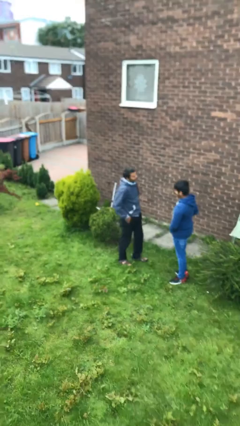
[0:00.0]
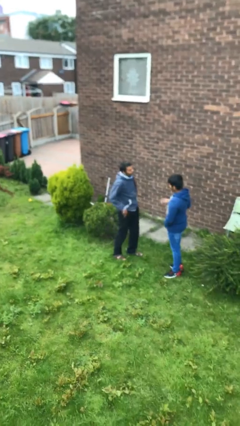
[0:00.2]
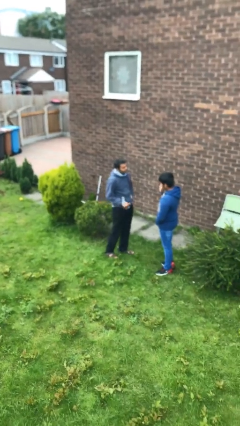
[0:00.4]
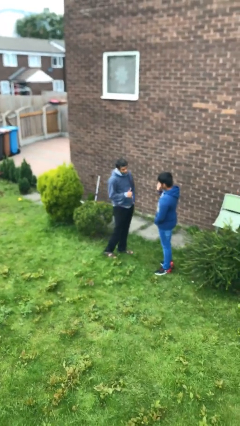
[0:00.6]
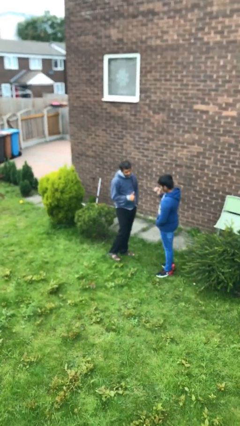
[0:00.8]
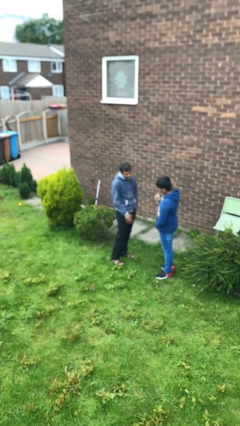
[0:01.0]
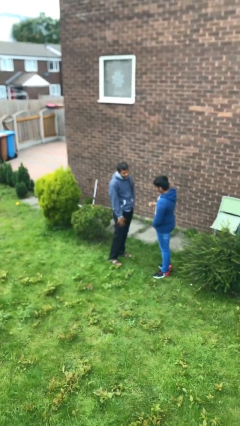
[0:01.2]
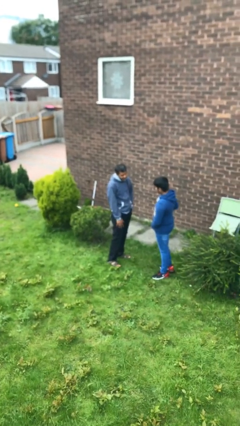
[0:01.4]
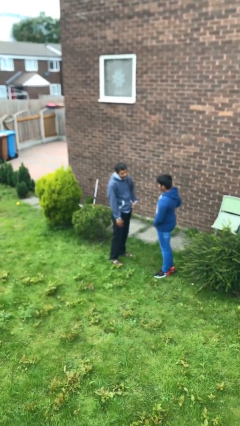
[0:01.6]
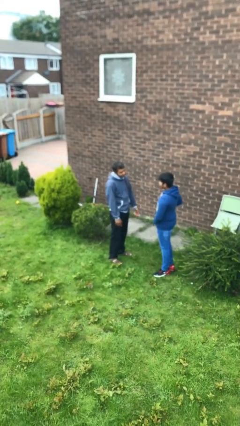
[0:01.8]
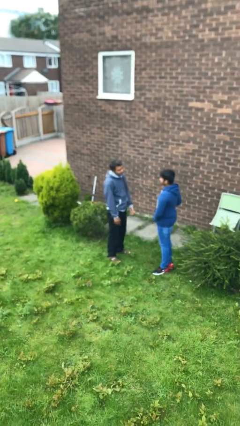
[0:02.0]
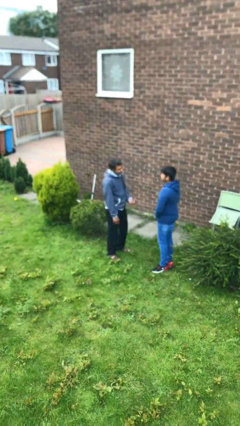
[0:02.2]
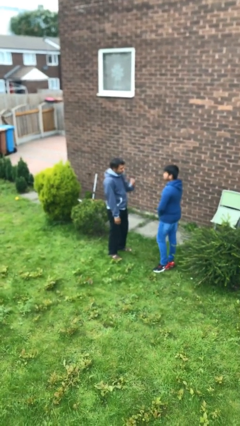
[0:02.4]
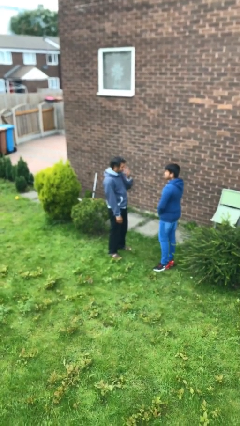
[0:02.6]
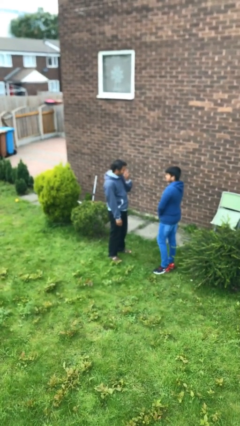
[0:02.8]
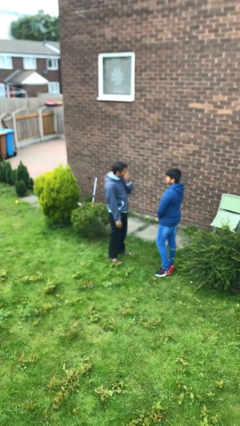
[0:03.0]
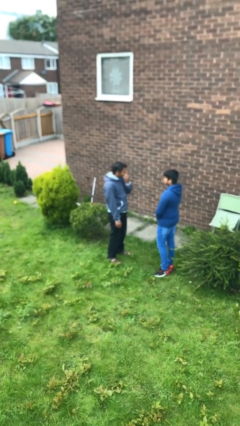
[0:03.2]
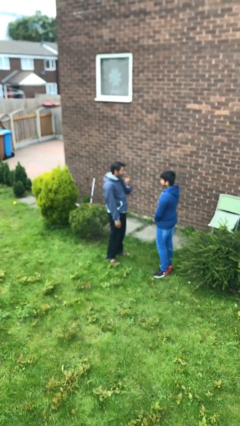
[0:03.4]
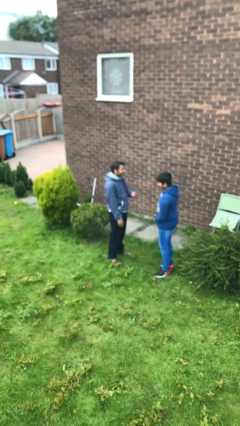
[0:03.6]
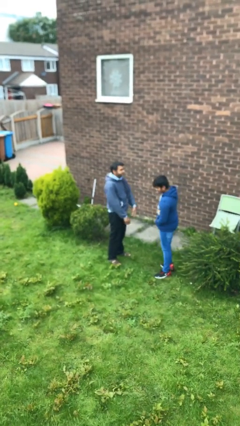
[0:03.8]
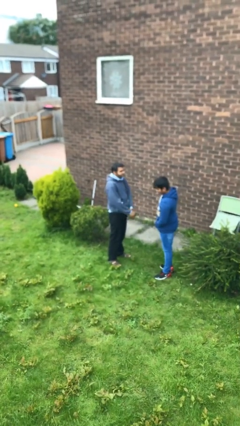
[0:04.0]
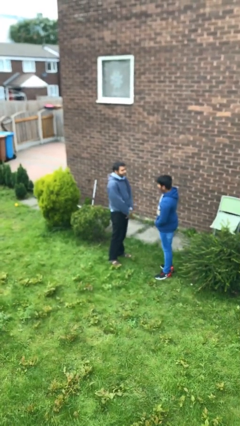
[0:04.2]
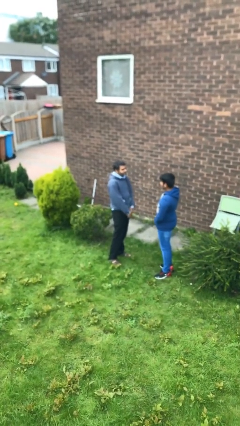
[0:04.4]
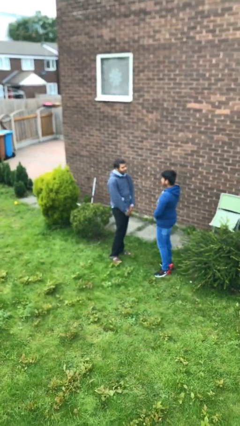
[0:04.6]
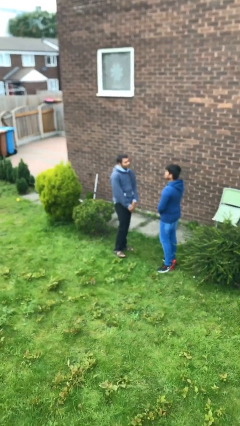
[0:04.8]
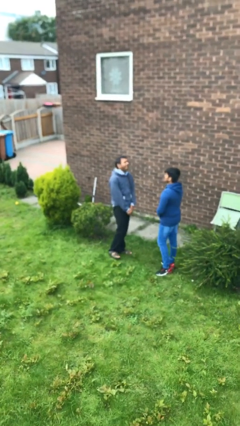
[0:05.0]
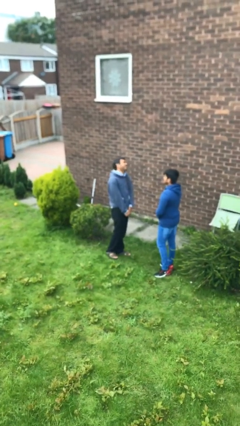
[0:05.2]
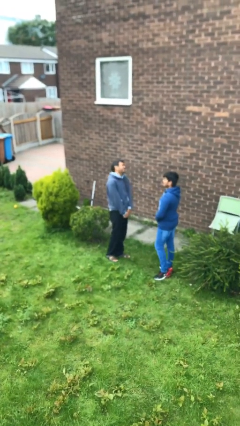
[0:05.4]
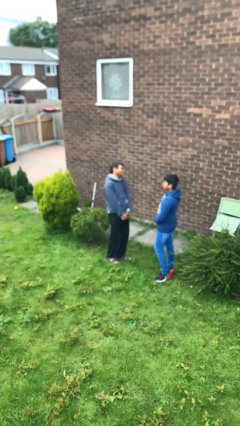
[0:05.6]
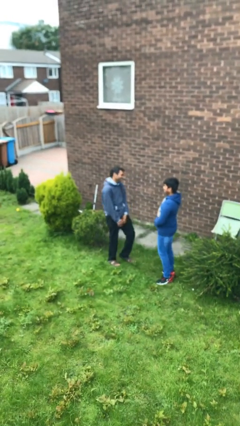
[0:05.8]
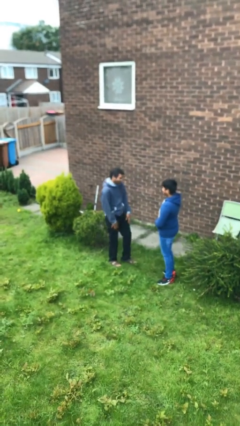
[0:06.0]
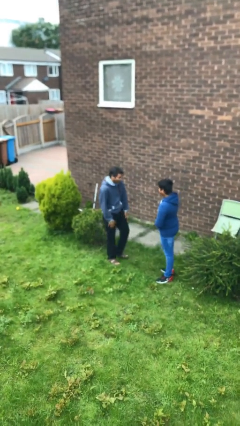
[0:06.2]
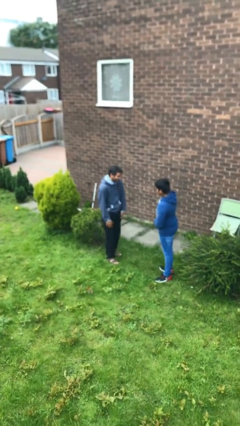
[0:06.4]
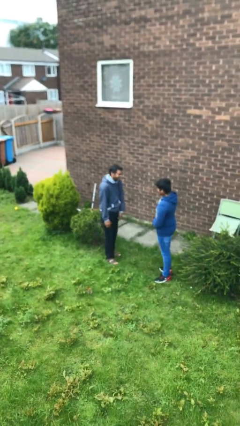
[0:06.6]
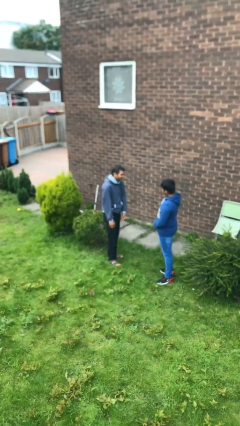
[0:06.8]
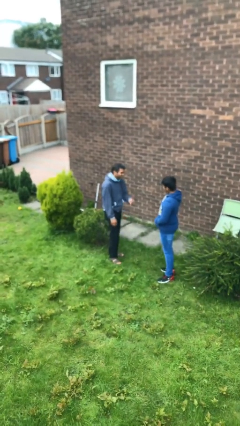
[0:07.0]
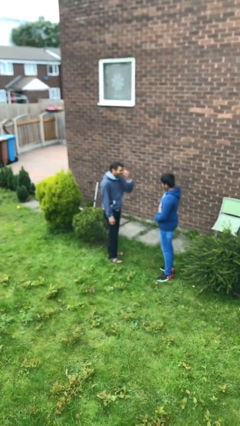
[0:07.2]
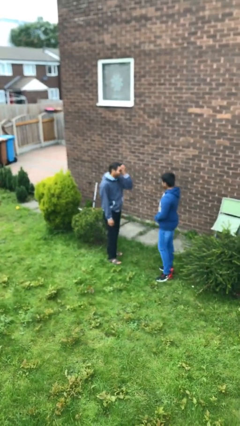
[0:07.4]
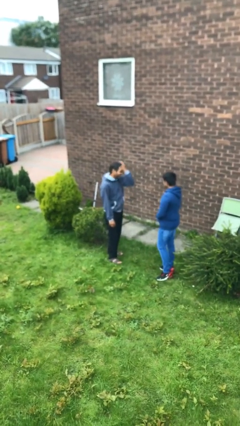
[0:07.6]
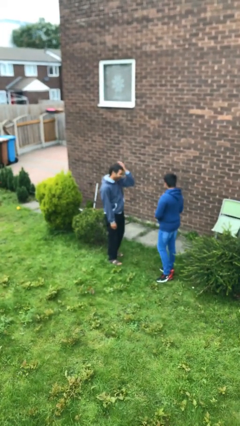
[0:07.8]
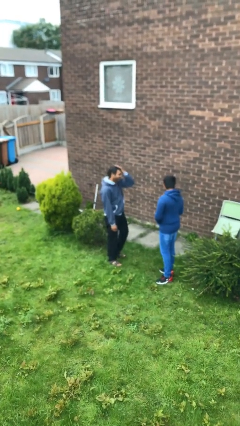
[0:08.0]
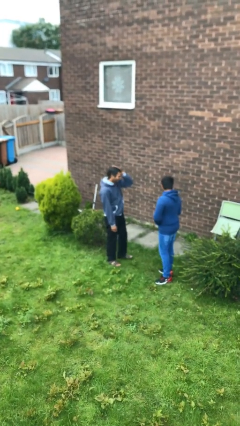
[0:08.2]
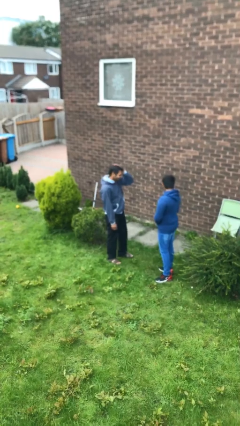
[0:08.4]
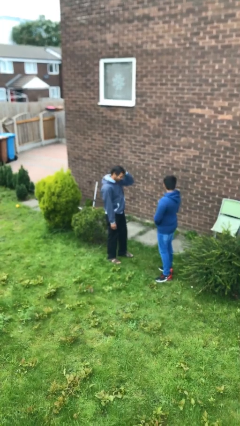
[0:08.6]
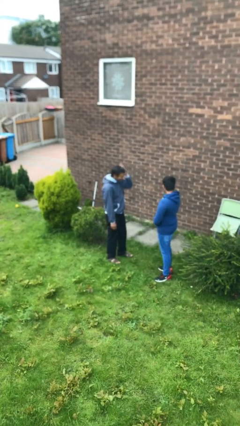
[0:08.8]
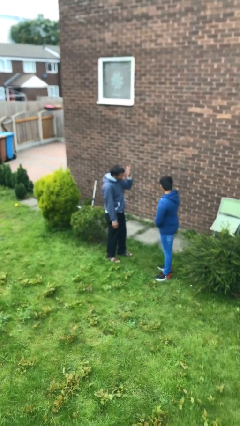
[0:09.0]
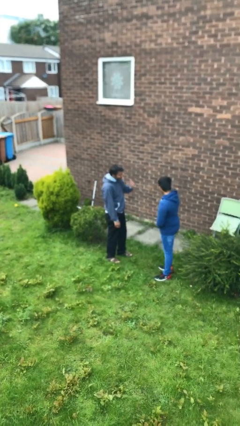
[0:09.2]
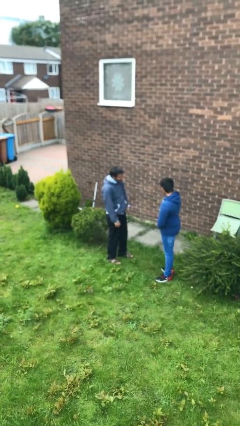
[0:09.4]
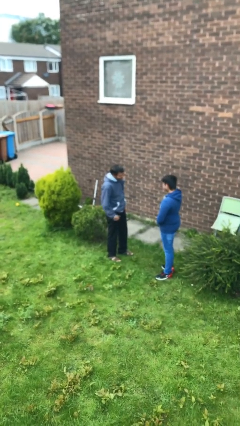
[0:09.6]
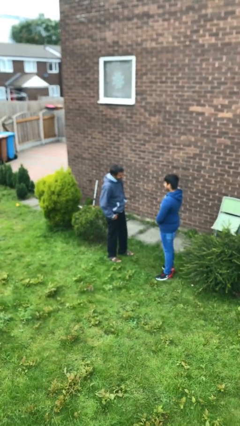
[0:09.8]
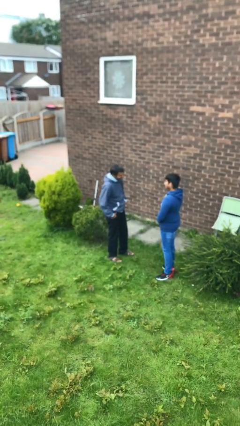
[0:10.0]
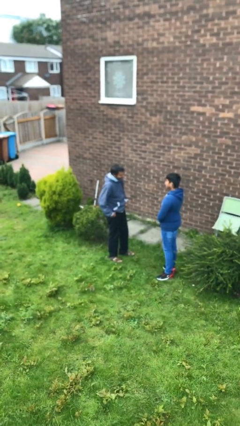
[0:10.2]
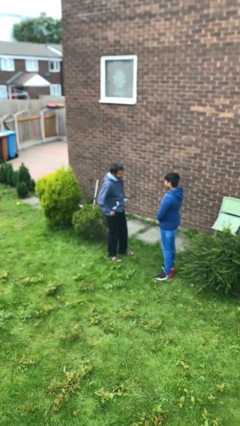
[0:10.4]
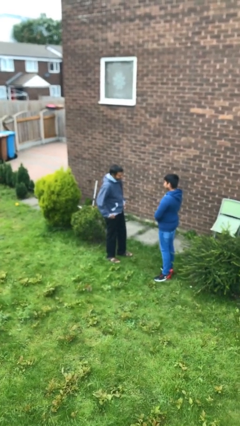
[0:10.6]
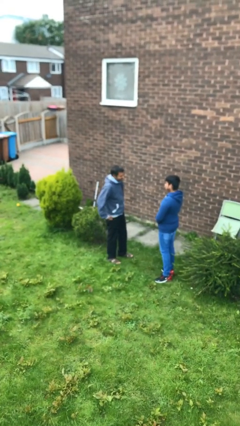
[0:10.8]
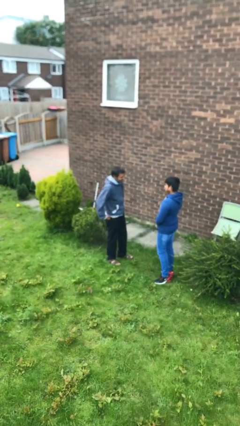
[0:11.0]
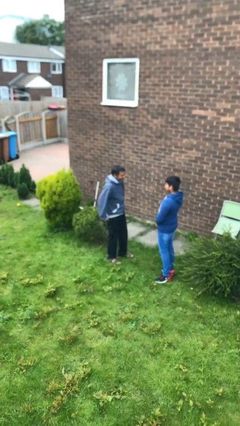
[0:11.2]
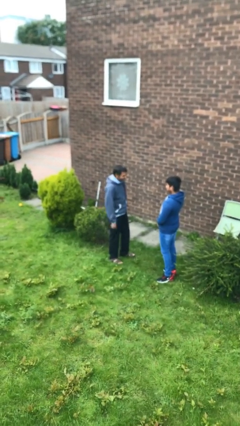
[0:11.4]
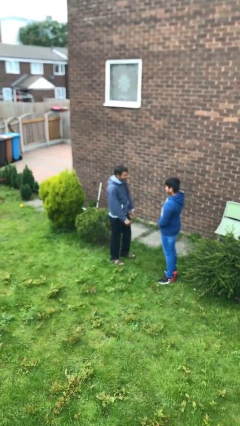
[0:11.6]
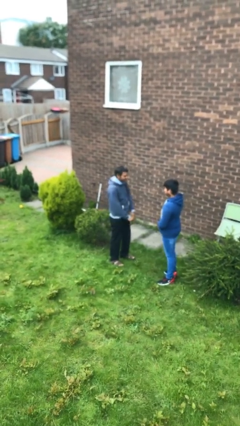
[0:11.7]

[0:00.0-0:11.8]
person talks to person

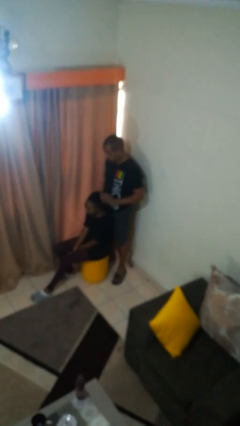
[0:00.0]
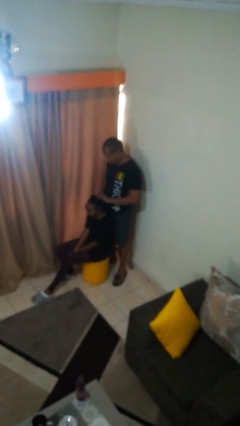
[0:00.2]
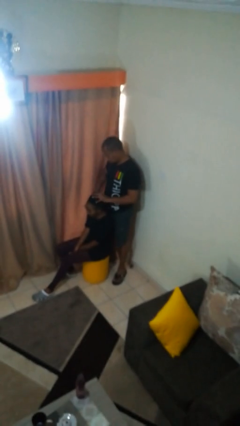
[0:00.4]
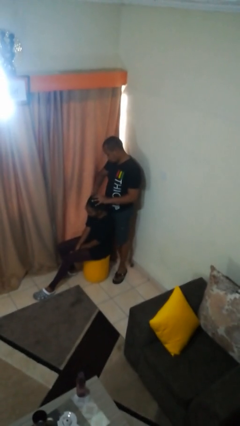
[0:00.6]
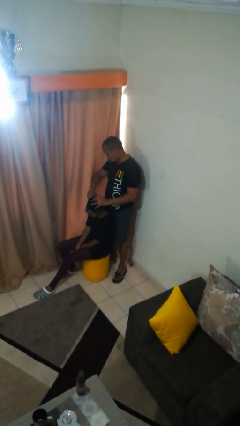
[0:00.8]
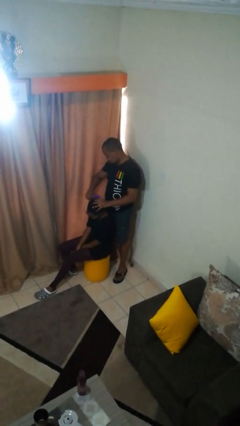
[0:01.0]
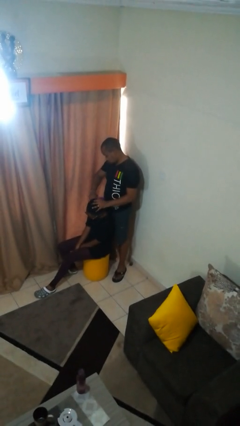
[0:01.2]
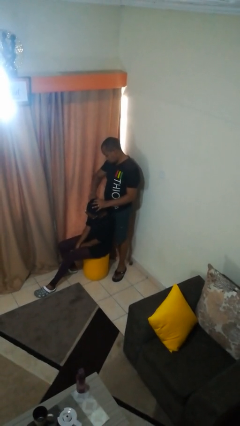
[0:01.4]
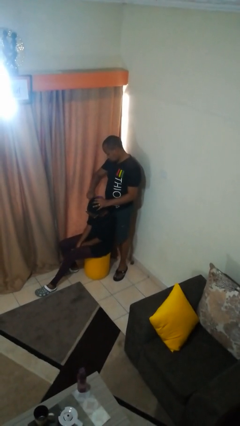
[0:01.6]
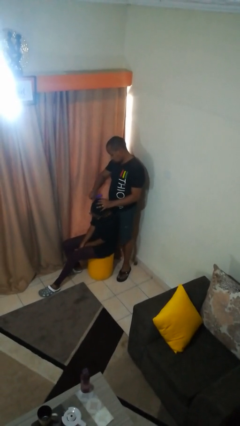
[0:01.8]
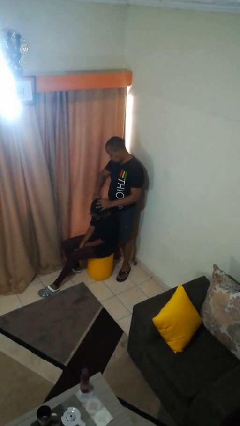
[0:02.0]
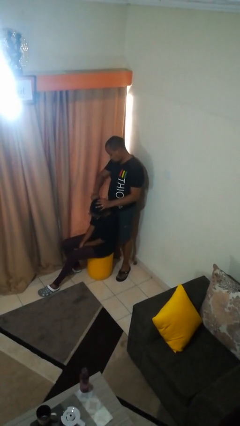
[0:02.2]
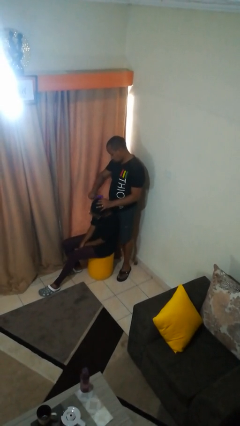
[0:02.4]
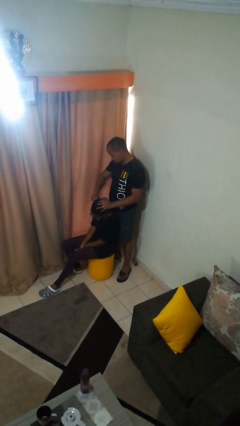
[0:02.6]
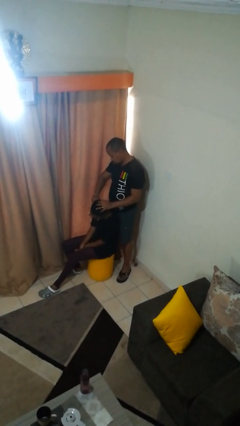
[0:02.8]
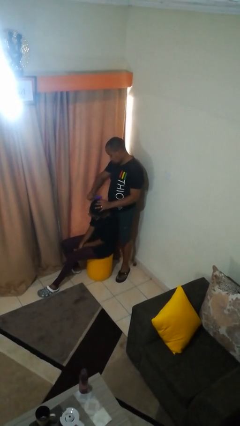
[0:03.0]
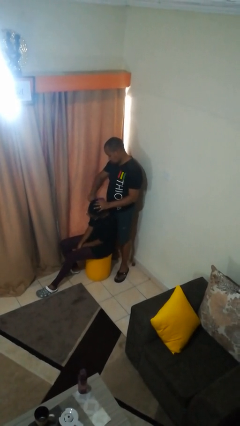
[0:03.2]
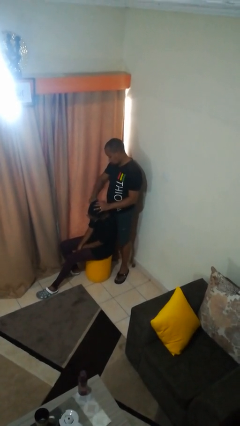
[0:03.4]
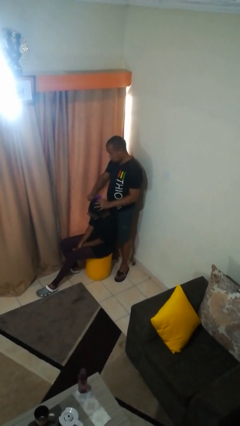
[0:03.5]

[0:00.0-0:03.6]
person brushes hair of person

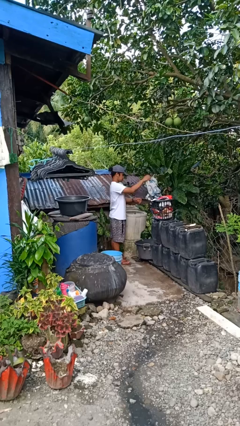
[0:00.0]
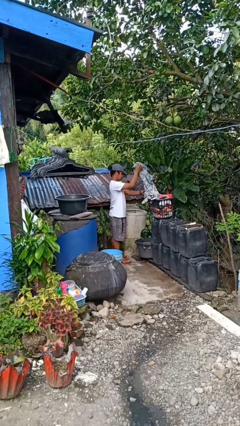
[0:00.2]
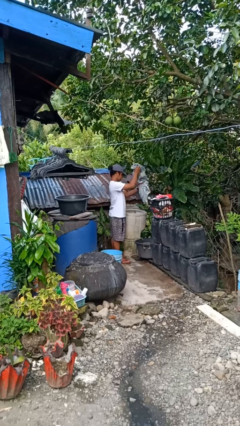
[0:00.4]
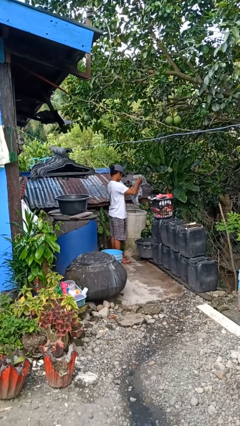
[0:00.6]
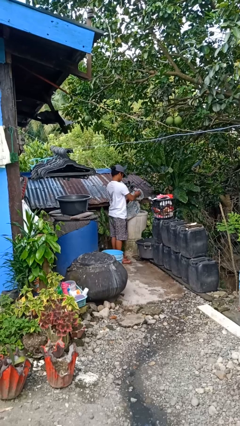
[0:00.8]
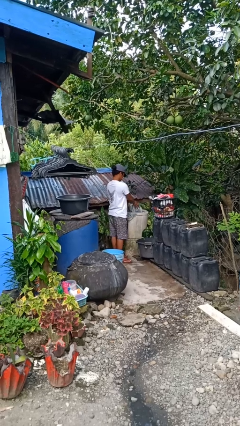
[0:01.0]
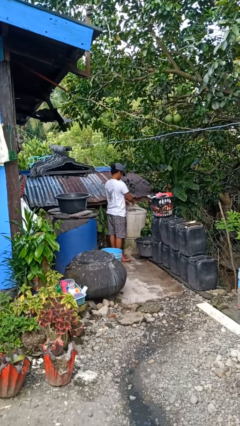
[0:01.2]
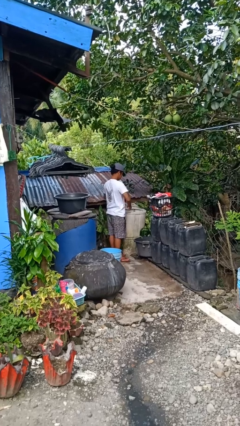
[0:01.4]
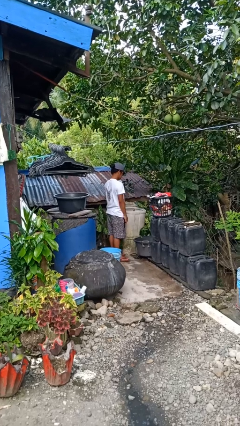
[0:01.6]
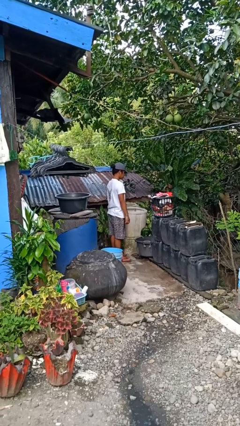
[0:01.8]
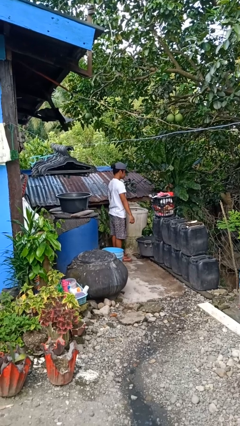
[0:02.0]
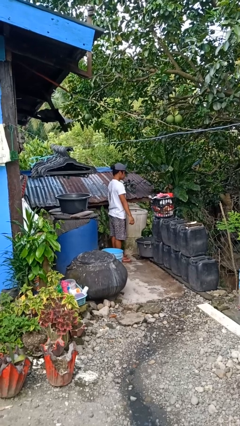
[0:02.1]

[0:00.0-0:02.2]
person loads clotheswasher

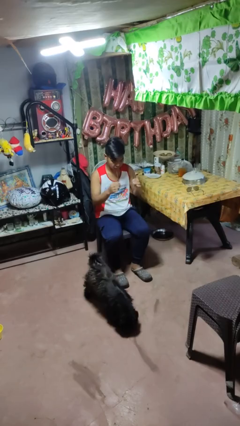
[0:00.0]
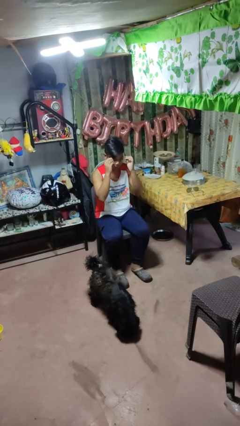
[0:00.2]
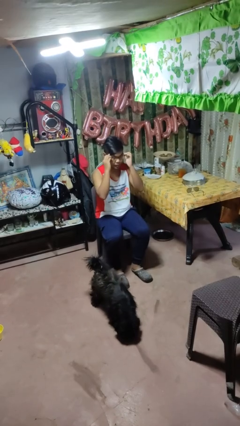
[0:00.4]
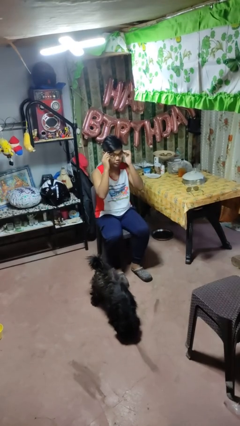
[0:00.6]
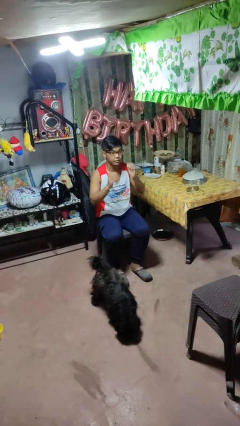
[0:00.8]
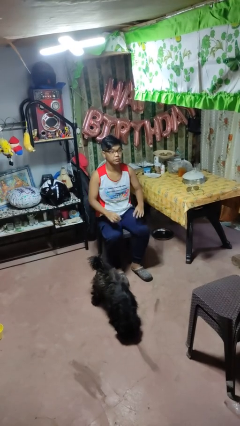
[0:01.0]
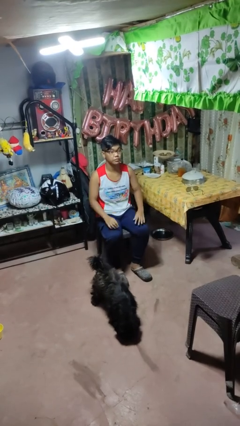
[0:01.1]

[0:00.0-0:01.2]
person puts on glasses
